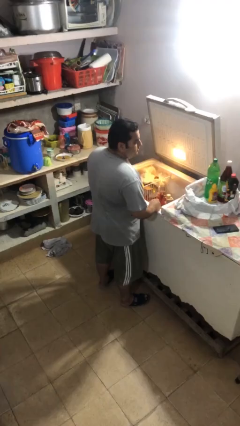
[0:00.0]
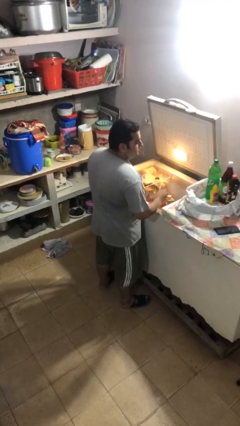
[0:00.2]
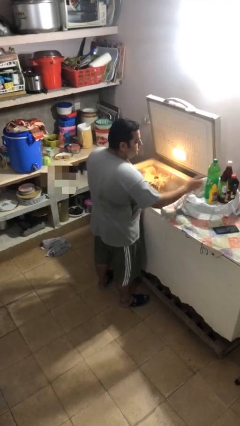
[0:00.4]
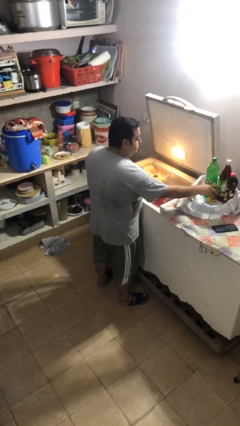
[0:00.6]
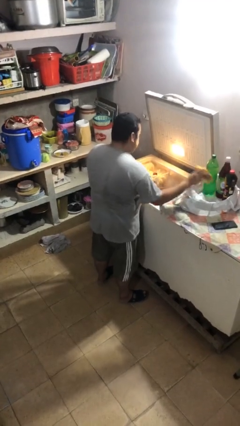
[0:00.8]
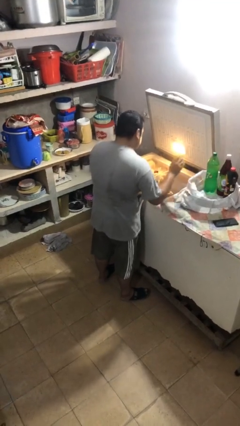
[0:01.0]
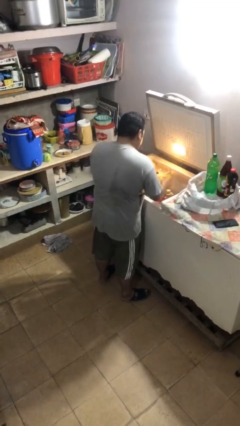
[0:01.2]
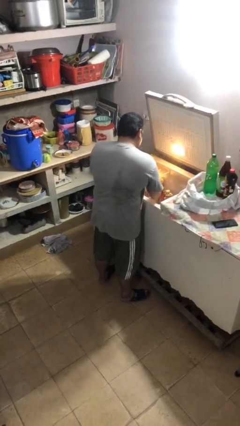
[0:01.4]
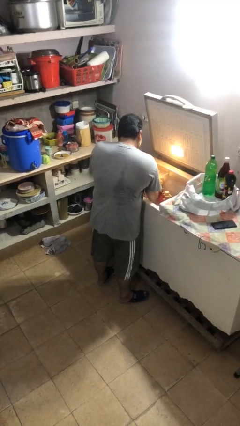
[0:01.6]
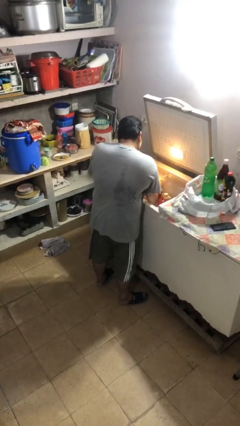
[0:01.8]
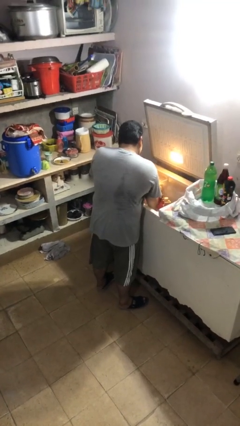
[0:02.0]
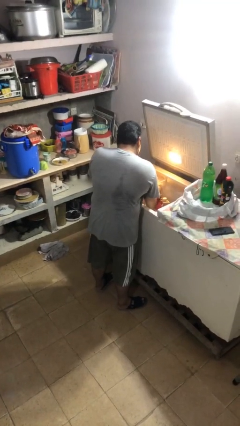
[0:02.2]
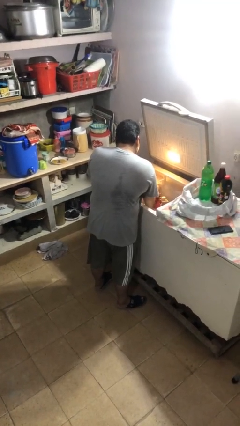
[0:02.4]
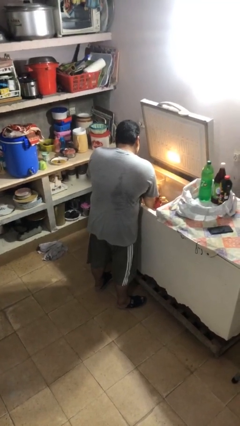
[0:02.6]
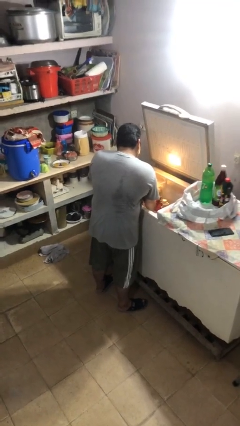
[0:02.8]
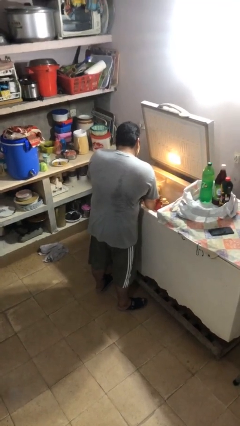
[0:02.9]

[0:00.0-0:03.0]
person loads groceries into refrigerator

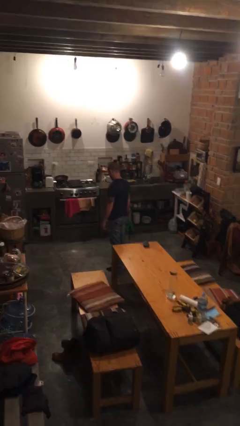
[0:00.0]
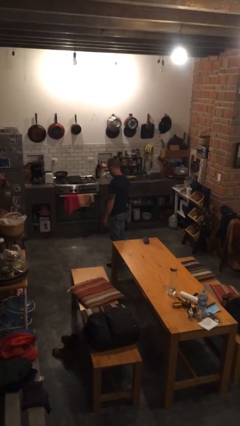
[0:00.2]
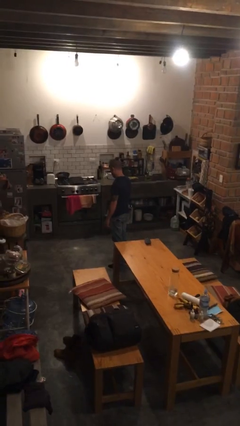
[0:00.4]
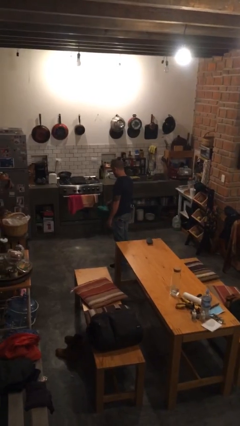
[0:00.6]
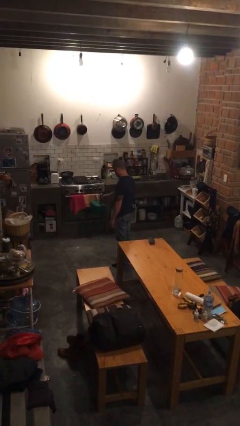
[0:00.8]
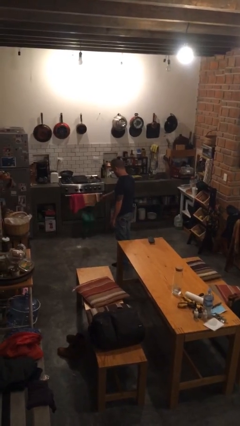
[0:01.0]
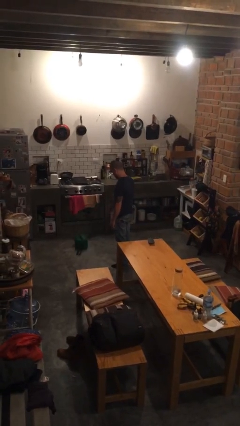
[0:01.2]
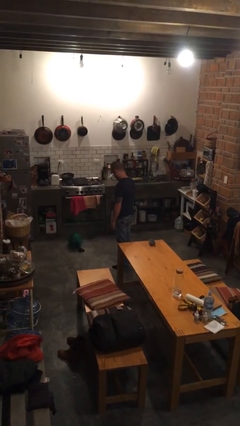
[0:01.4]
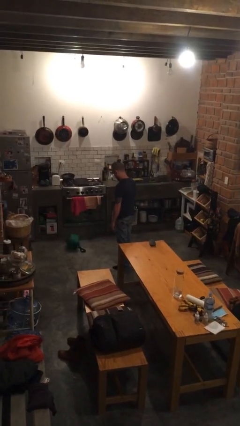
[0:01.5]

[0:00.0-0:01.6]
person throws object to ground

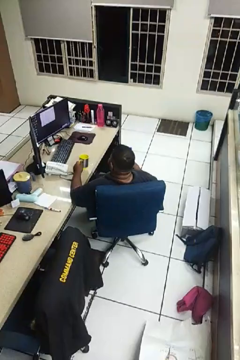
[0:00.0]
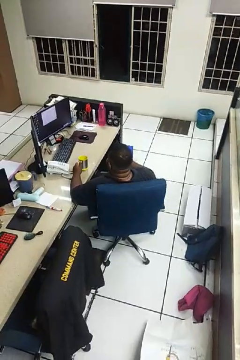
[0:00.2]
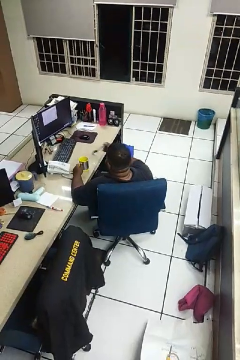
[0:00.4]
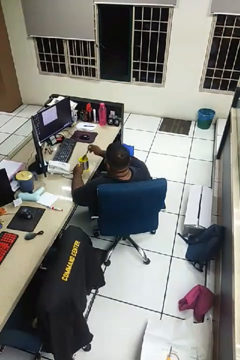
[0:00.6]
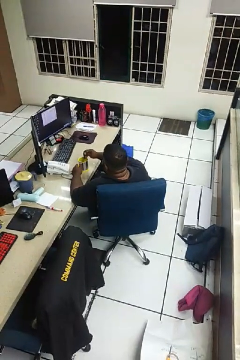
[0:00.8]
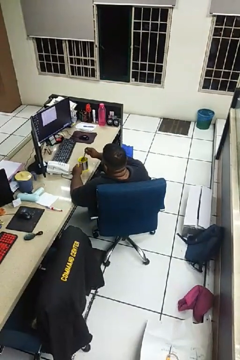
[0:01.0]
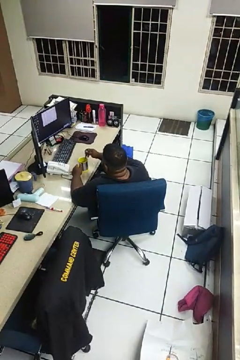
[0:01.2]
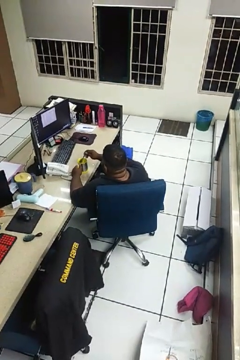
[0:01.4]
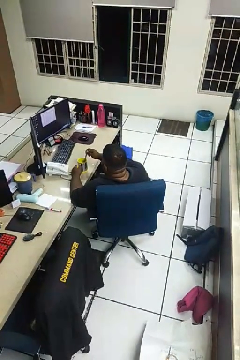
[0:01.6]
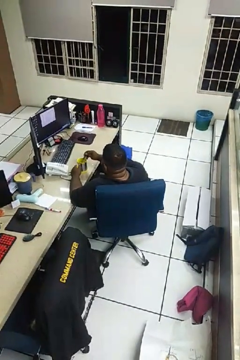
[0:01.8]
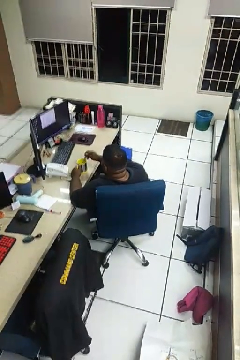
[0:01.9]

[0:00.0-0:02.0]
person stirs mug

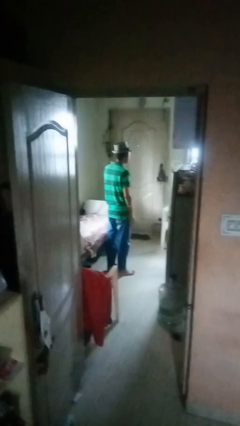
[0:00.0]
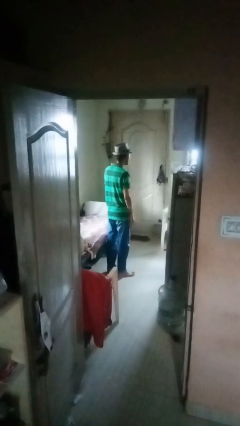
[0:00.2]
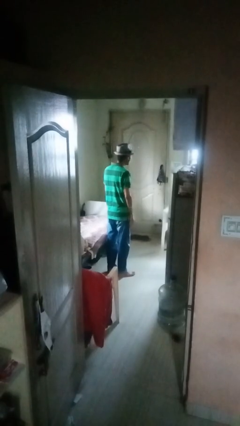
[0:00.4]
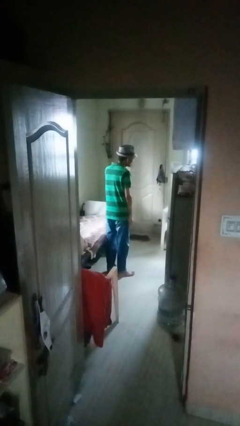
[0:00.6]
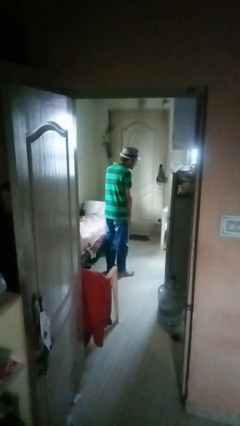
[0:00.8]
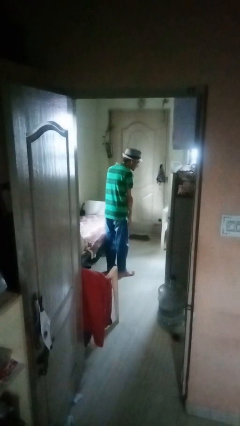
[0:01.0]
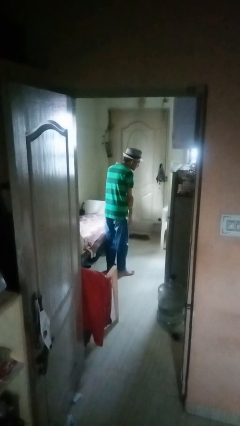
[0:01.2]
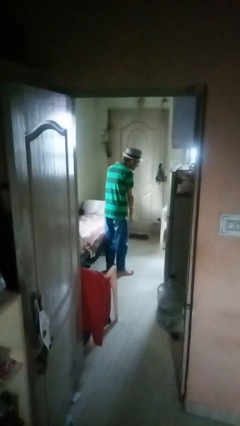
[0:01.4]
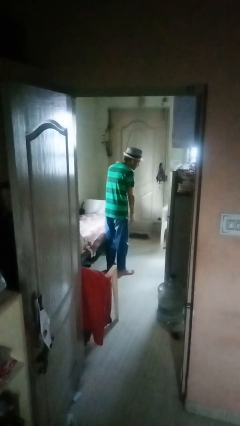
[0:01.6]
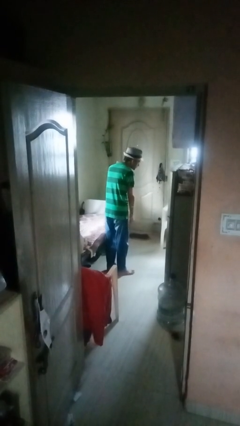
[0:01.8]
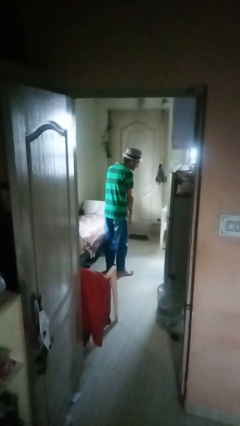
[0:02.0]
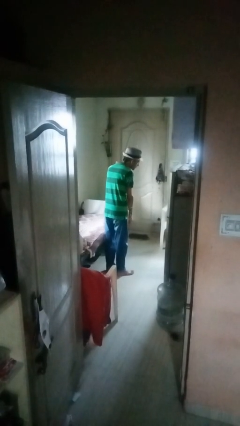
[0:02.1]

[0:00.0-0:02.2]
person gestures listen closely

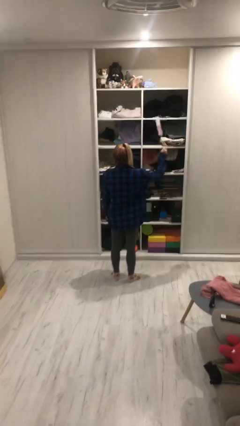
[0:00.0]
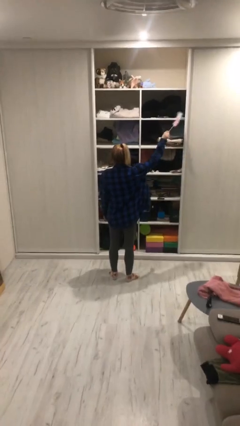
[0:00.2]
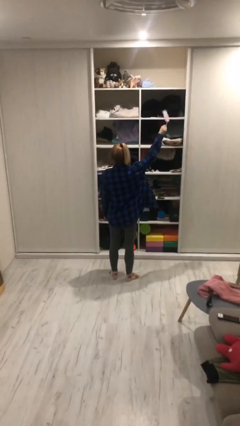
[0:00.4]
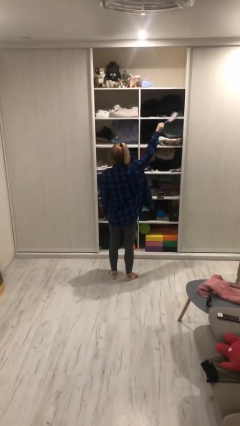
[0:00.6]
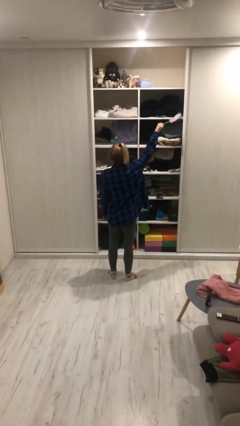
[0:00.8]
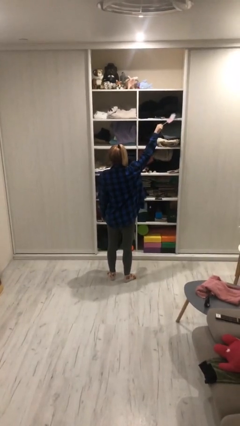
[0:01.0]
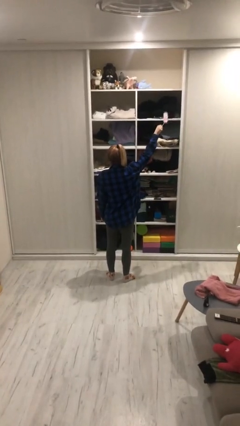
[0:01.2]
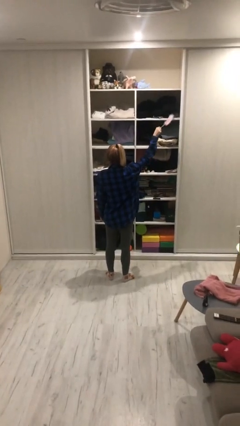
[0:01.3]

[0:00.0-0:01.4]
person dusts furniture

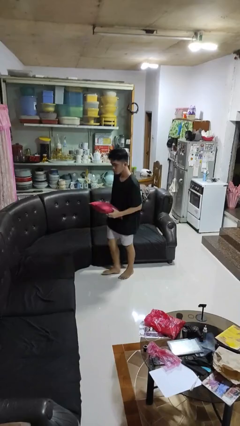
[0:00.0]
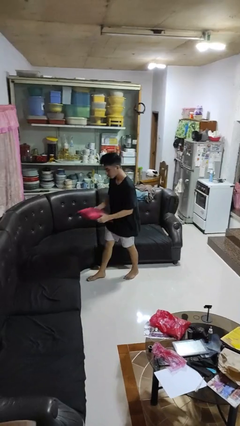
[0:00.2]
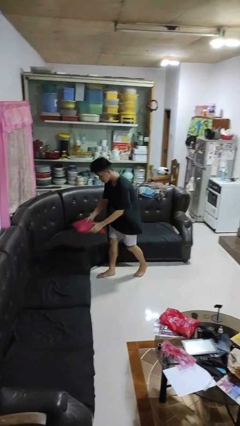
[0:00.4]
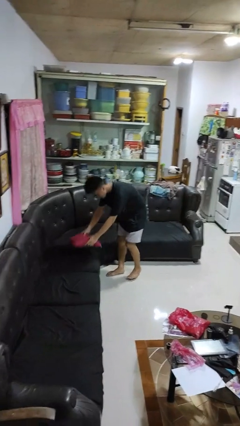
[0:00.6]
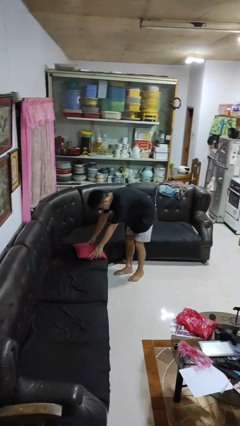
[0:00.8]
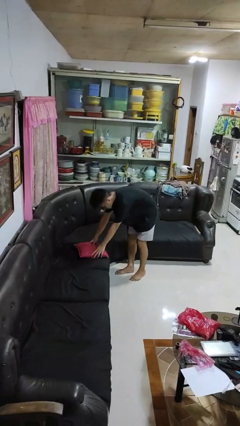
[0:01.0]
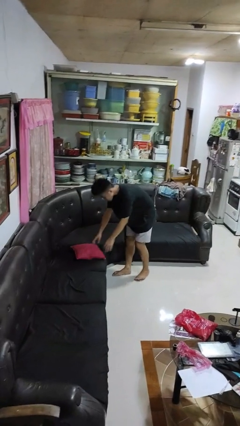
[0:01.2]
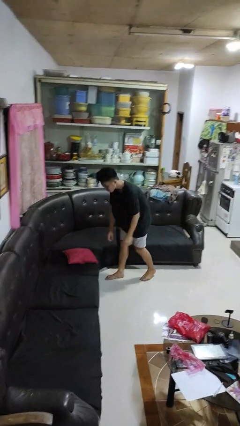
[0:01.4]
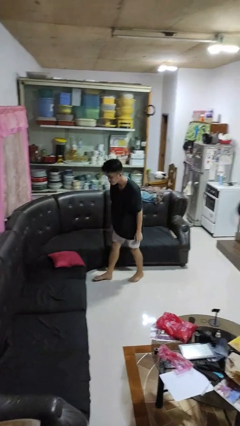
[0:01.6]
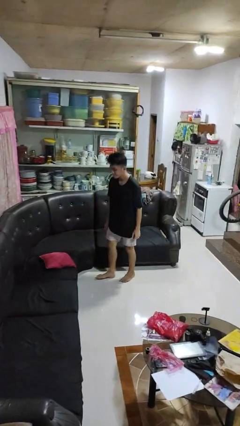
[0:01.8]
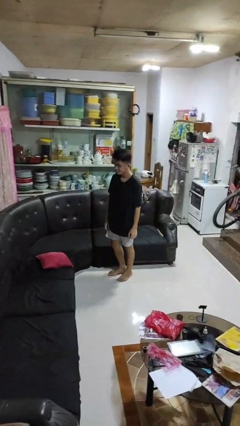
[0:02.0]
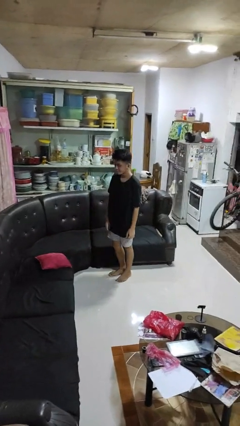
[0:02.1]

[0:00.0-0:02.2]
person puts down object on couch

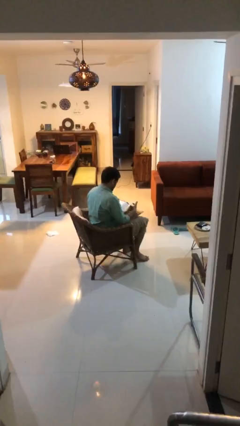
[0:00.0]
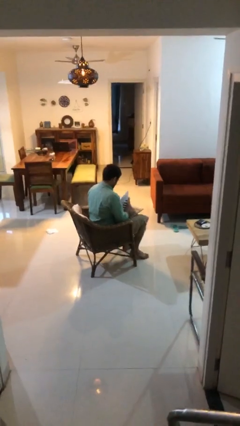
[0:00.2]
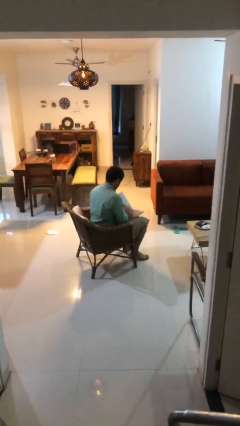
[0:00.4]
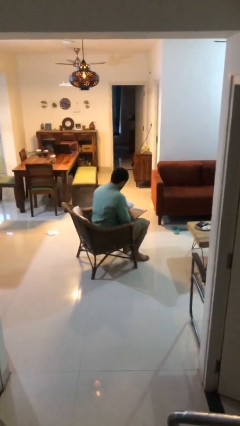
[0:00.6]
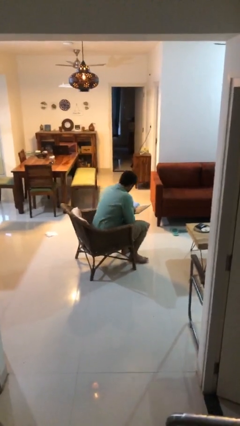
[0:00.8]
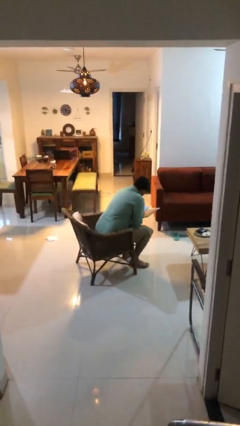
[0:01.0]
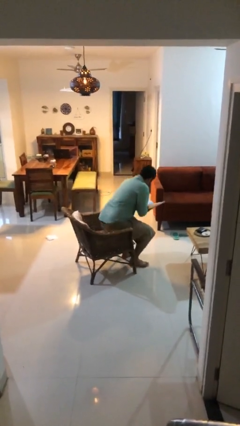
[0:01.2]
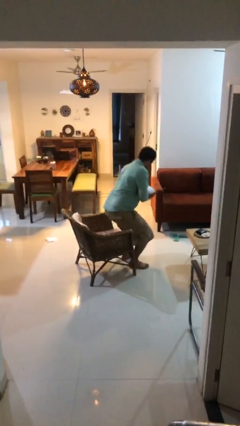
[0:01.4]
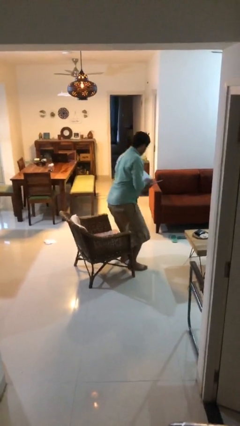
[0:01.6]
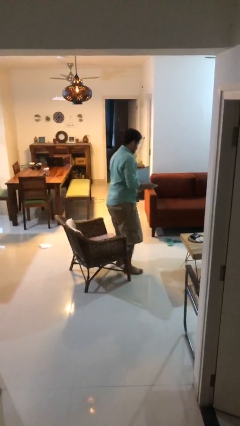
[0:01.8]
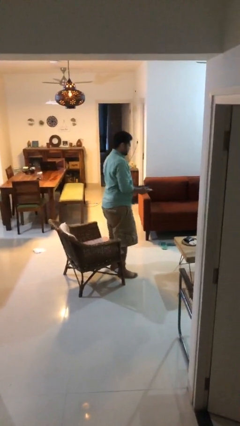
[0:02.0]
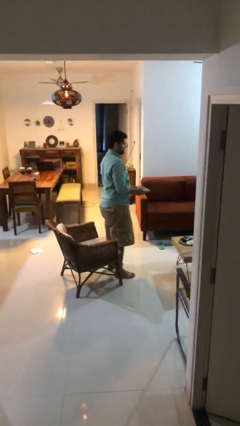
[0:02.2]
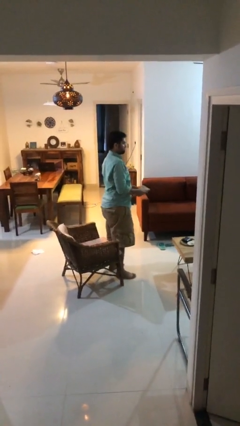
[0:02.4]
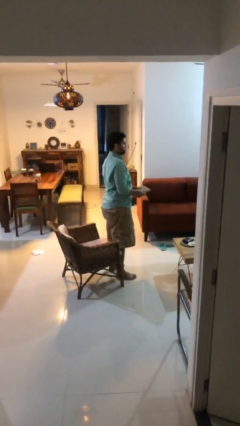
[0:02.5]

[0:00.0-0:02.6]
person stands up

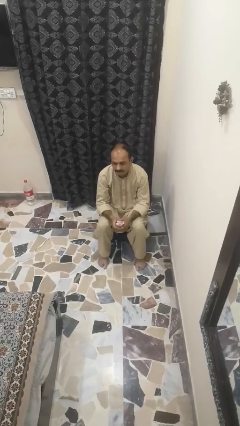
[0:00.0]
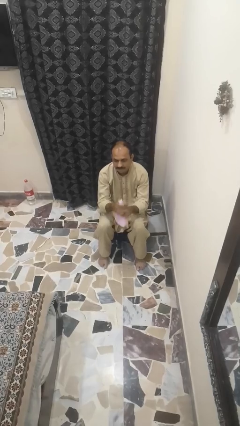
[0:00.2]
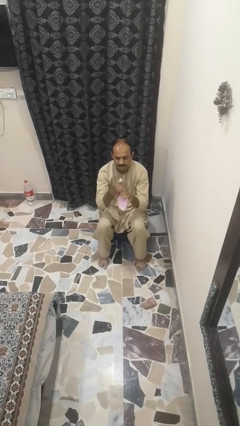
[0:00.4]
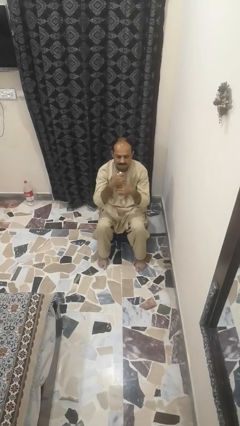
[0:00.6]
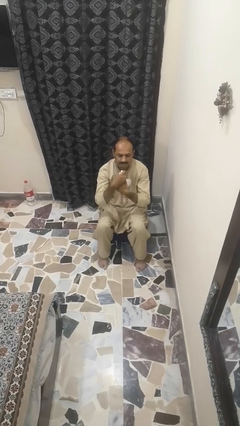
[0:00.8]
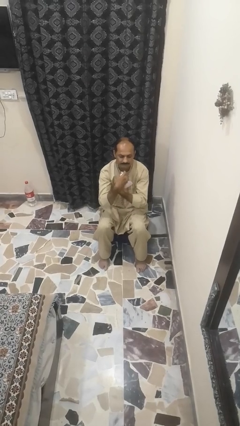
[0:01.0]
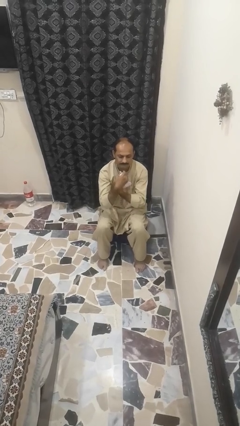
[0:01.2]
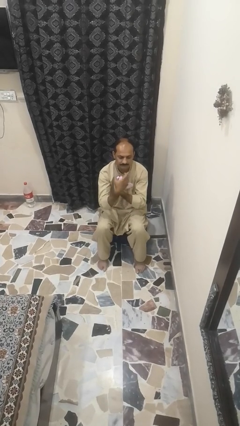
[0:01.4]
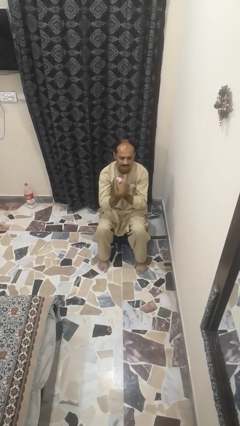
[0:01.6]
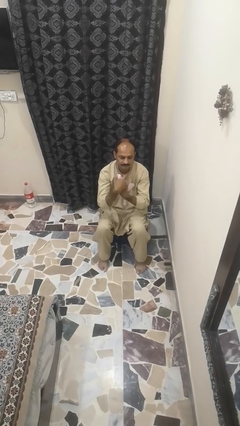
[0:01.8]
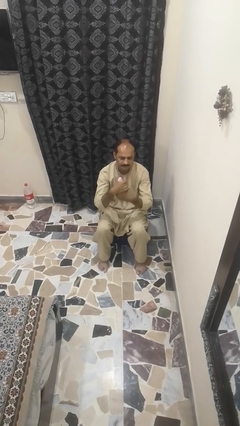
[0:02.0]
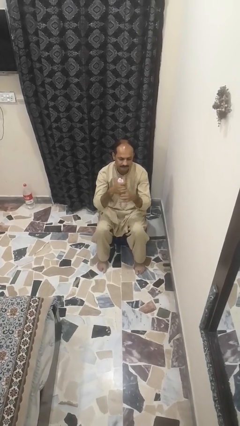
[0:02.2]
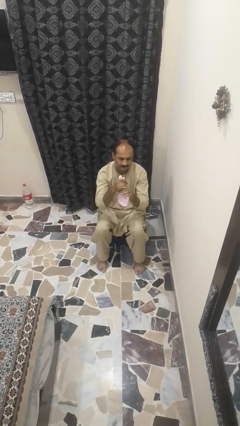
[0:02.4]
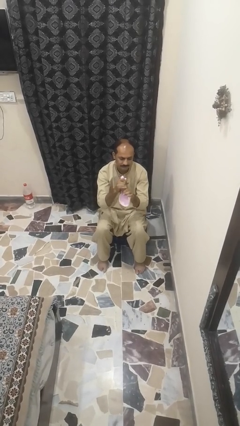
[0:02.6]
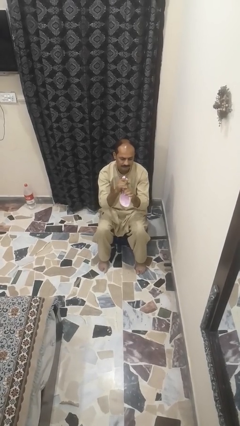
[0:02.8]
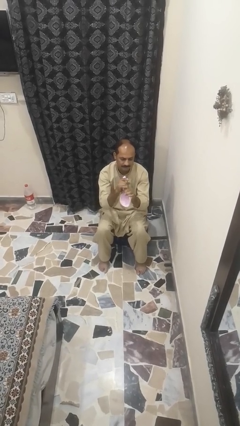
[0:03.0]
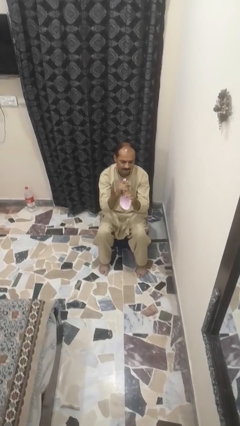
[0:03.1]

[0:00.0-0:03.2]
person squeezes object
